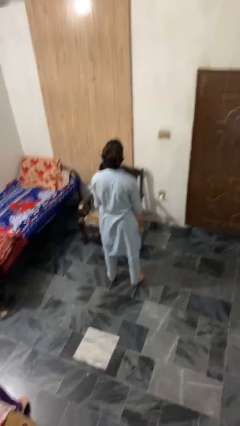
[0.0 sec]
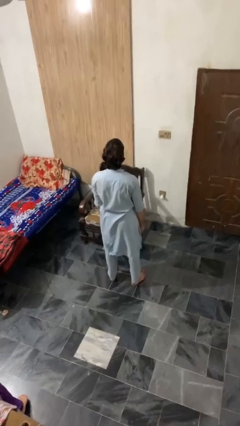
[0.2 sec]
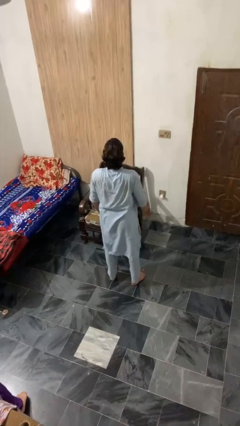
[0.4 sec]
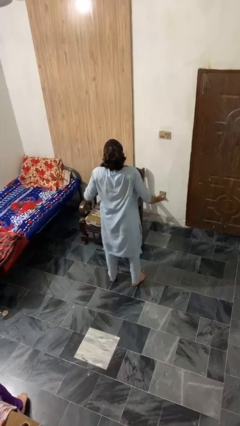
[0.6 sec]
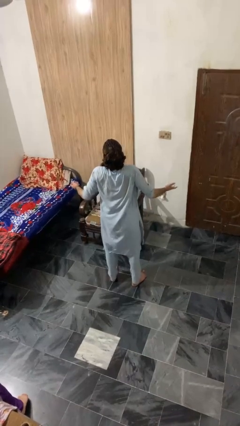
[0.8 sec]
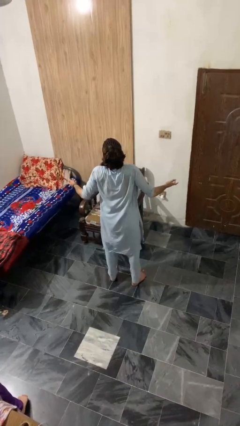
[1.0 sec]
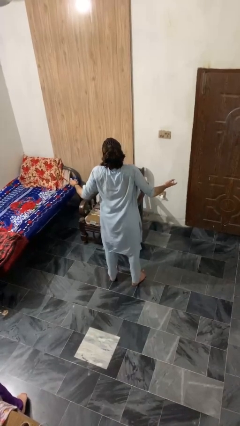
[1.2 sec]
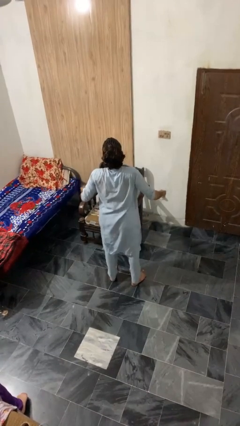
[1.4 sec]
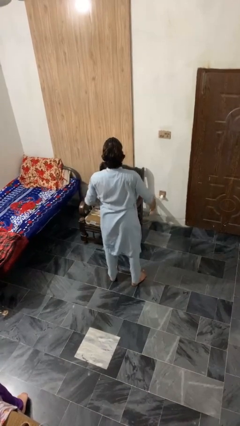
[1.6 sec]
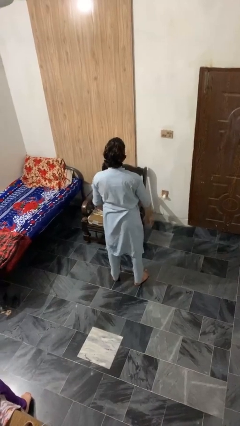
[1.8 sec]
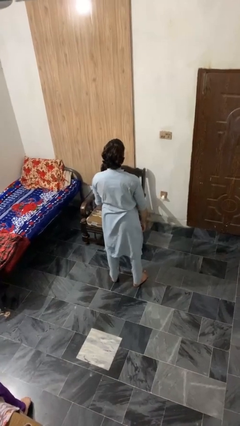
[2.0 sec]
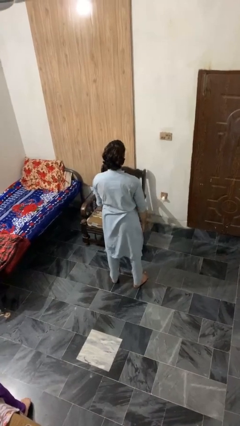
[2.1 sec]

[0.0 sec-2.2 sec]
person shrugs

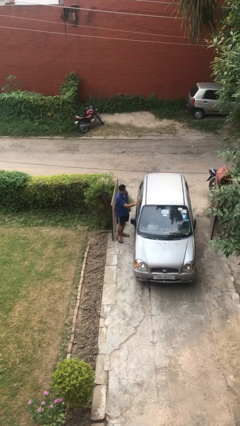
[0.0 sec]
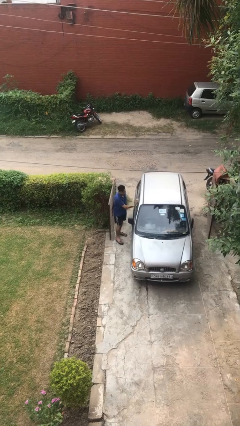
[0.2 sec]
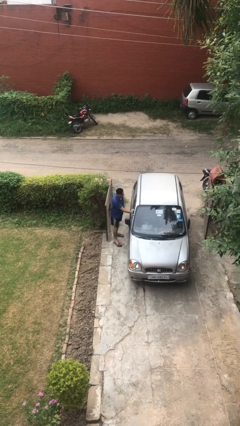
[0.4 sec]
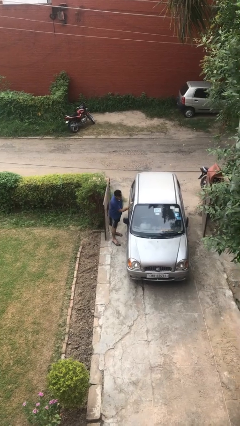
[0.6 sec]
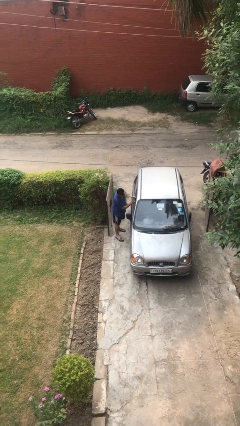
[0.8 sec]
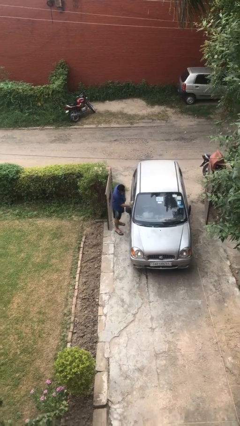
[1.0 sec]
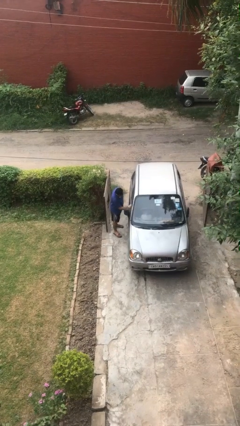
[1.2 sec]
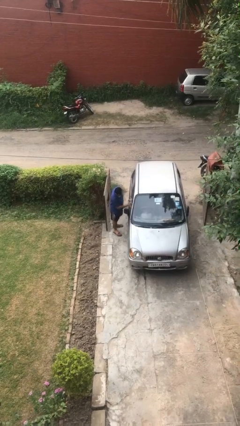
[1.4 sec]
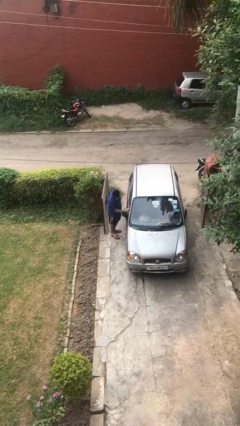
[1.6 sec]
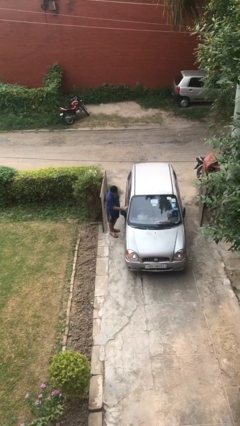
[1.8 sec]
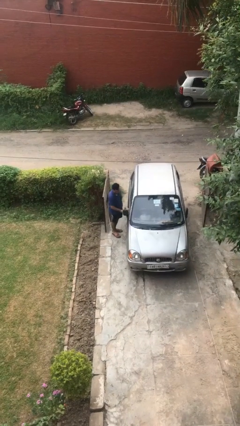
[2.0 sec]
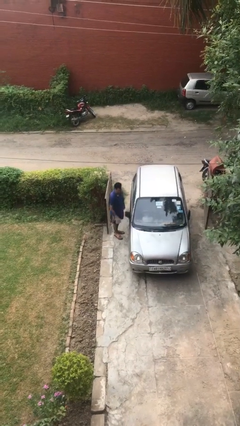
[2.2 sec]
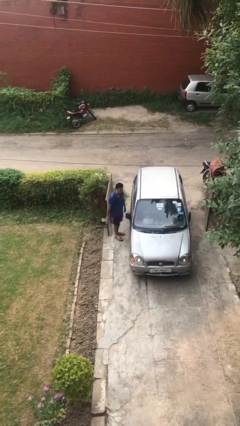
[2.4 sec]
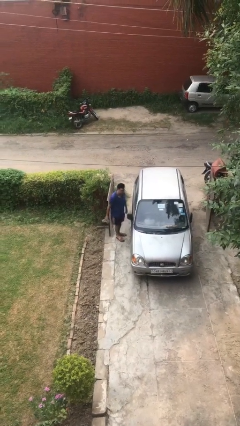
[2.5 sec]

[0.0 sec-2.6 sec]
person polishes car with rag

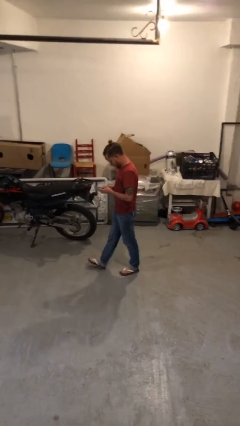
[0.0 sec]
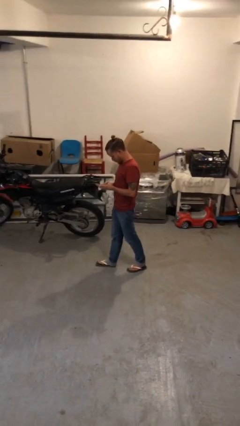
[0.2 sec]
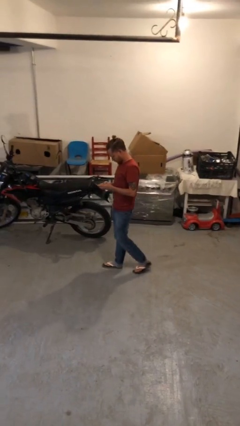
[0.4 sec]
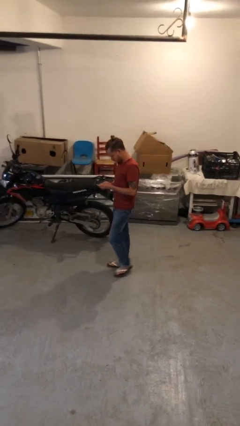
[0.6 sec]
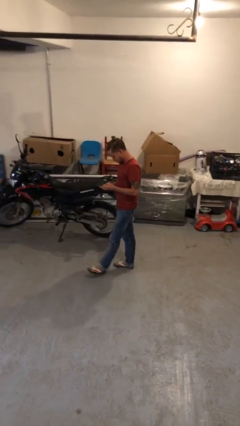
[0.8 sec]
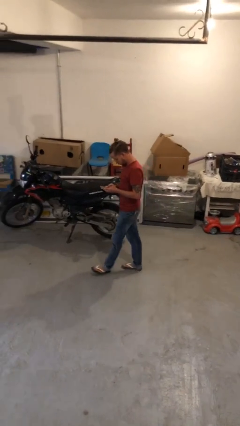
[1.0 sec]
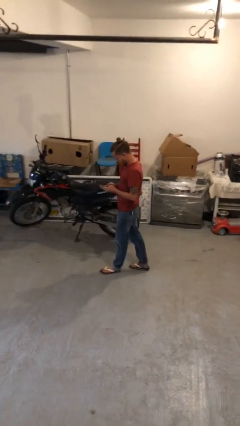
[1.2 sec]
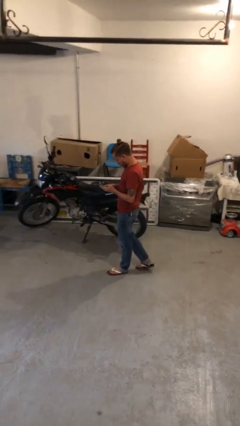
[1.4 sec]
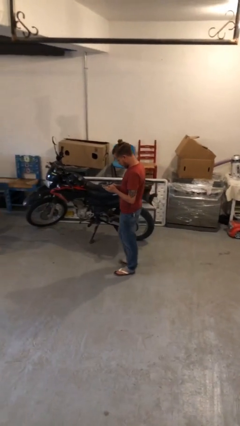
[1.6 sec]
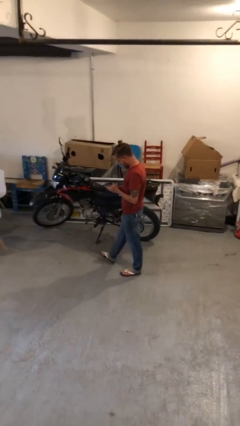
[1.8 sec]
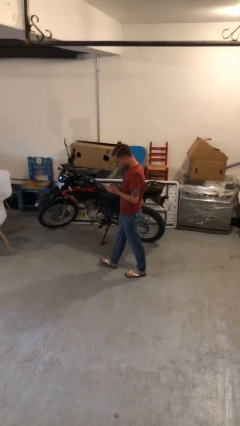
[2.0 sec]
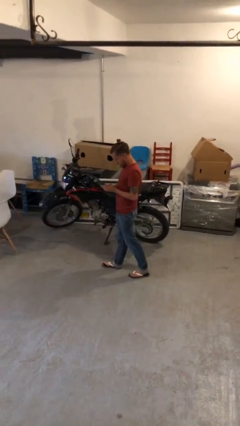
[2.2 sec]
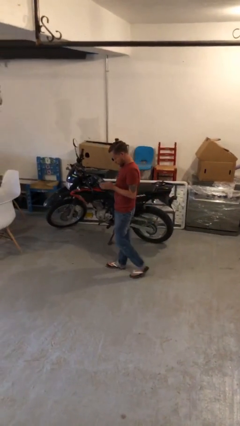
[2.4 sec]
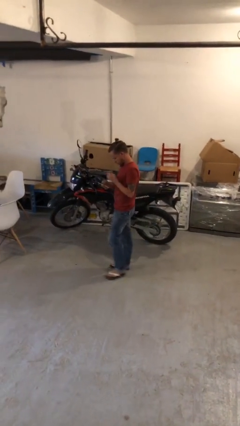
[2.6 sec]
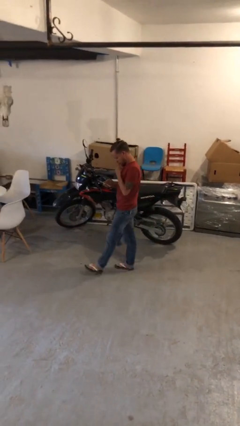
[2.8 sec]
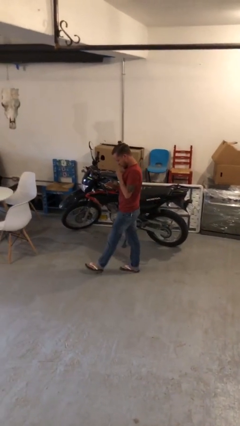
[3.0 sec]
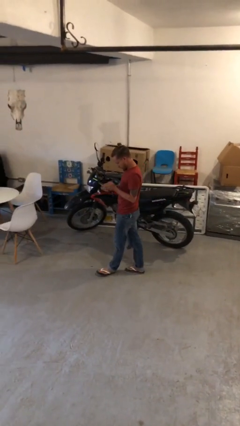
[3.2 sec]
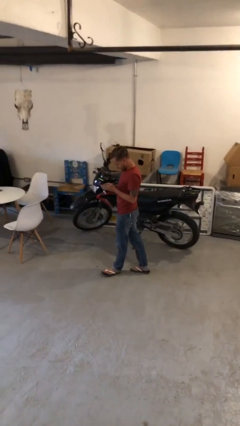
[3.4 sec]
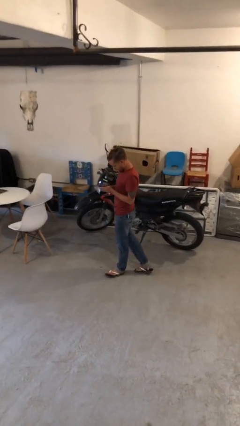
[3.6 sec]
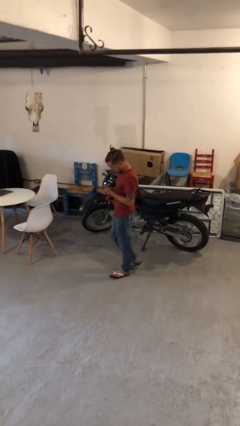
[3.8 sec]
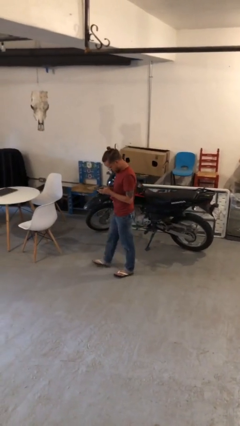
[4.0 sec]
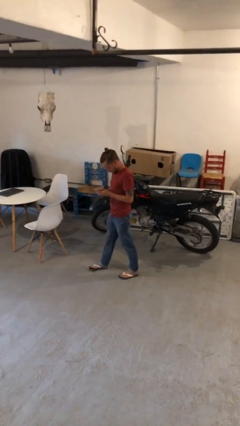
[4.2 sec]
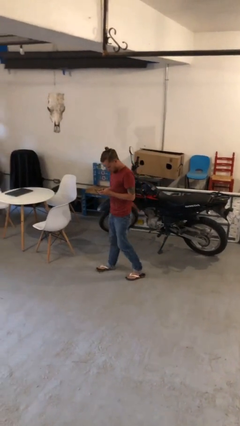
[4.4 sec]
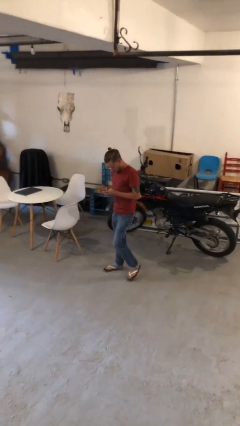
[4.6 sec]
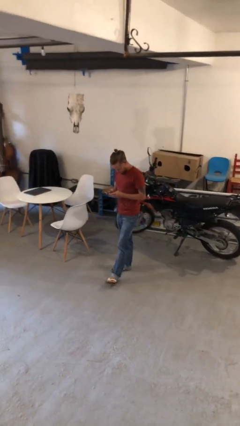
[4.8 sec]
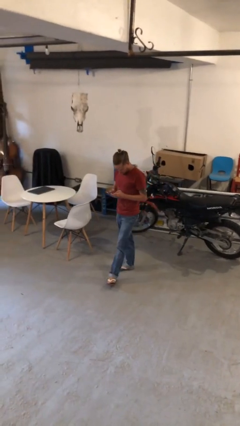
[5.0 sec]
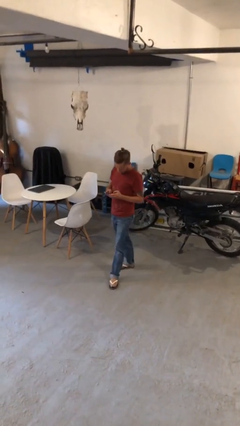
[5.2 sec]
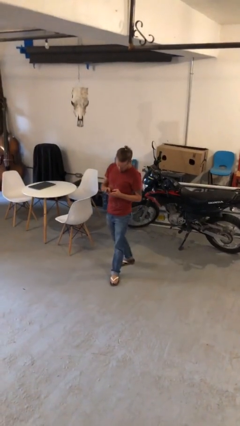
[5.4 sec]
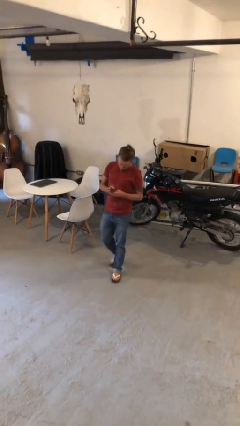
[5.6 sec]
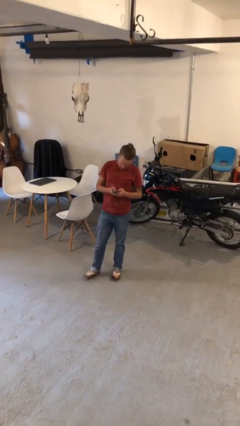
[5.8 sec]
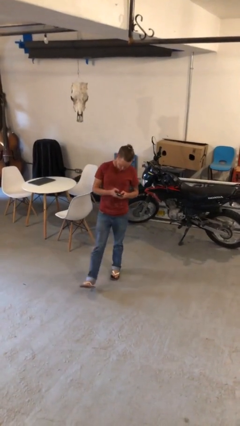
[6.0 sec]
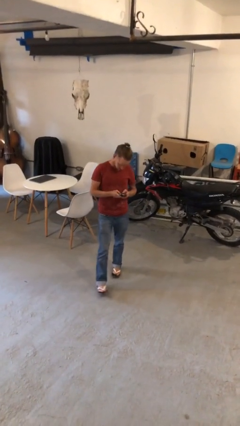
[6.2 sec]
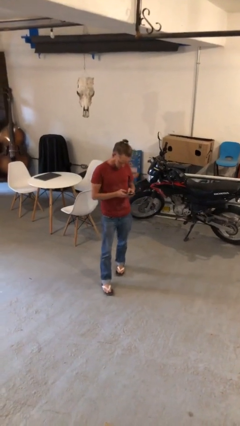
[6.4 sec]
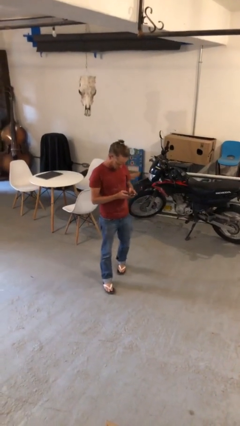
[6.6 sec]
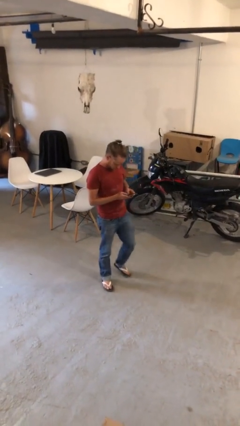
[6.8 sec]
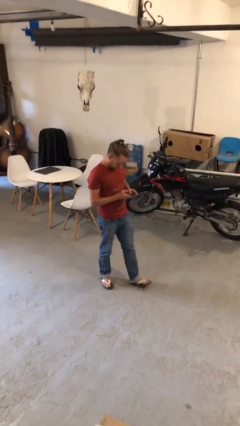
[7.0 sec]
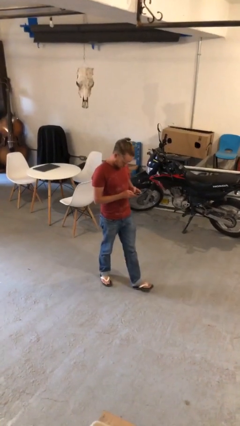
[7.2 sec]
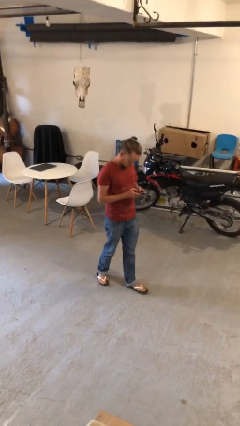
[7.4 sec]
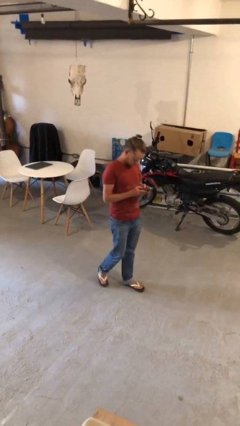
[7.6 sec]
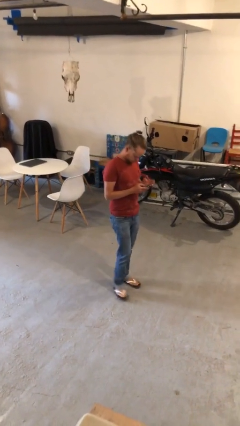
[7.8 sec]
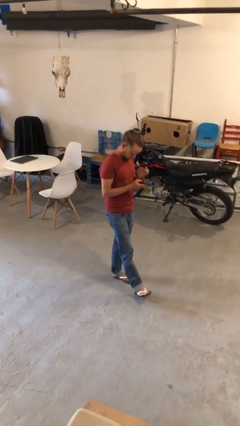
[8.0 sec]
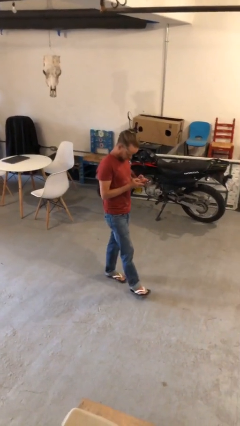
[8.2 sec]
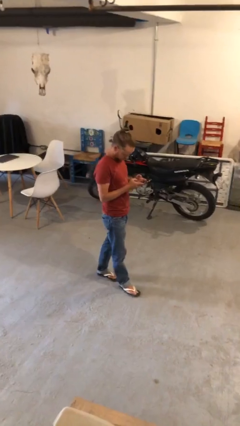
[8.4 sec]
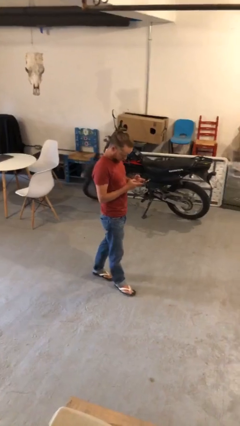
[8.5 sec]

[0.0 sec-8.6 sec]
person texts on phone

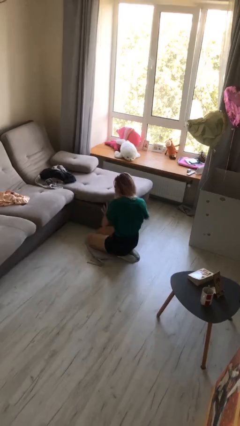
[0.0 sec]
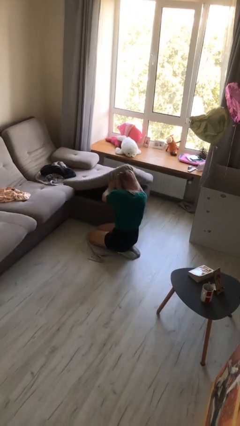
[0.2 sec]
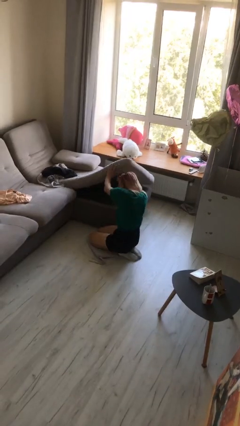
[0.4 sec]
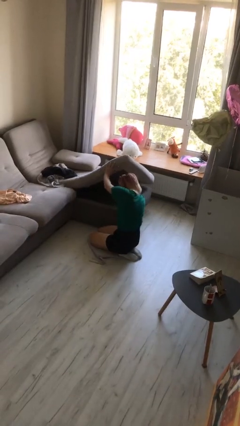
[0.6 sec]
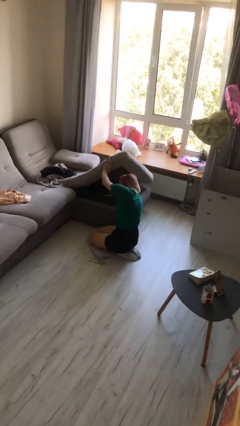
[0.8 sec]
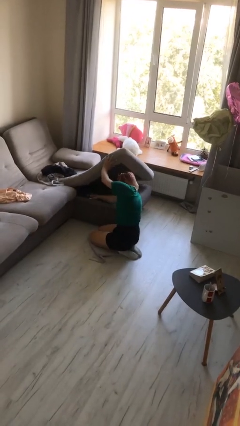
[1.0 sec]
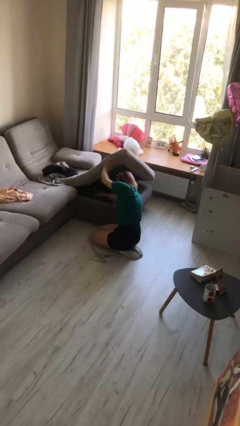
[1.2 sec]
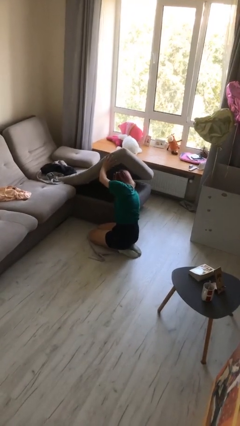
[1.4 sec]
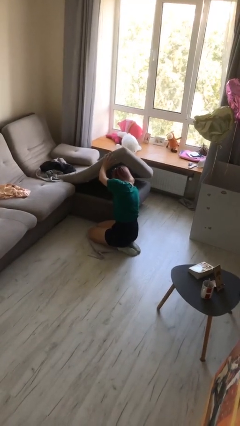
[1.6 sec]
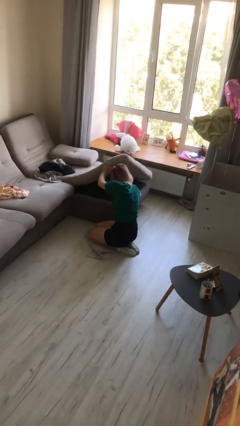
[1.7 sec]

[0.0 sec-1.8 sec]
person searches under couch

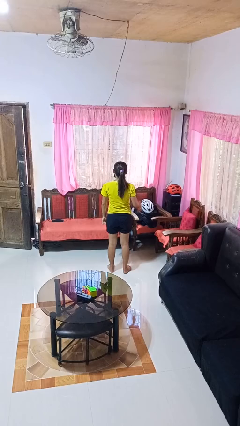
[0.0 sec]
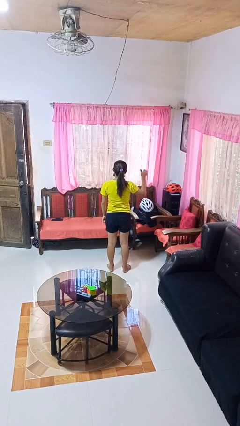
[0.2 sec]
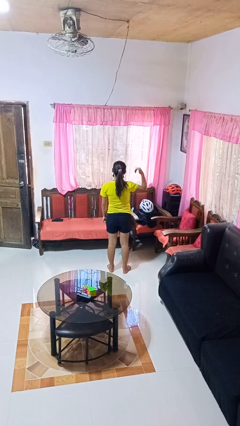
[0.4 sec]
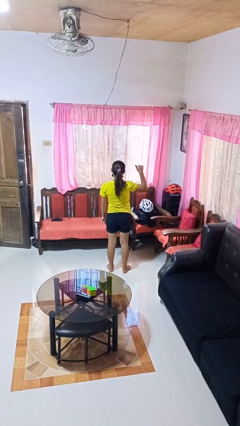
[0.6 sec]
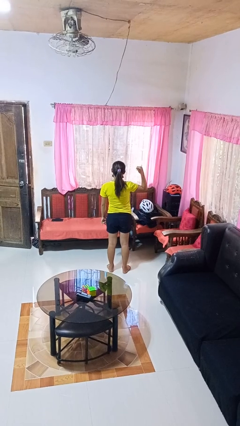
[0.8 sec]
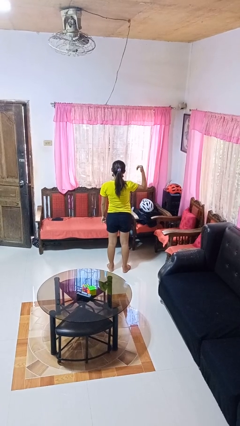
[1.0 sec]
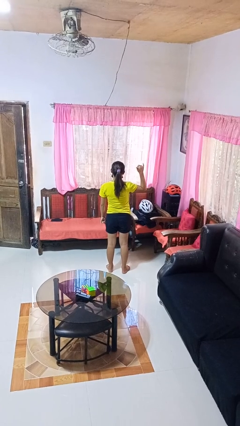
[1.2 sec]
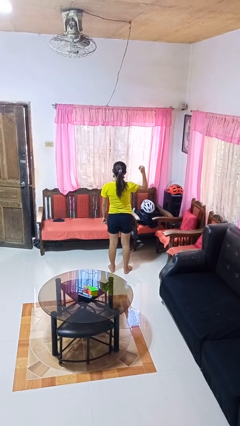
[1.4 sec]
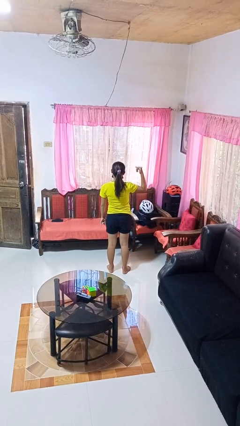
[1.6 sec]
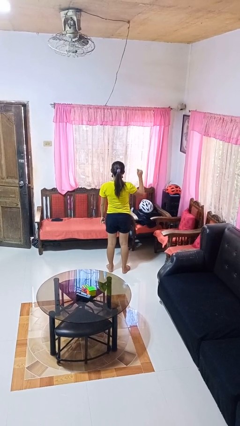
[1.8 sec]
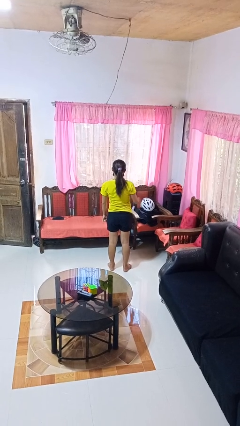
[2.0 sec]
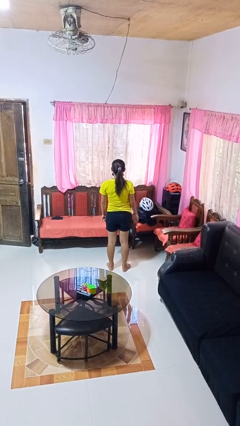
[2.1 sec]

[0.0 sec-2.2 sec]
person gestures hang loose
